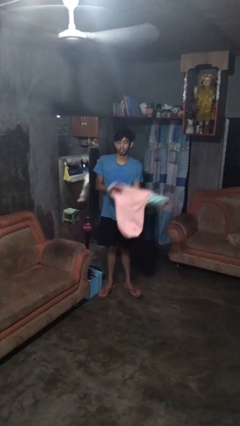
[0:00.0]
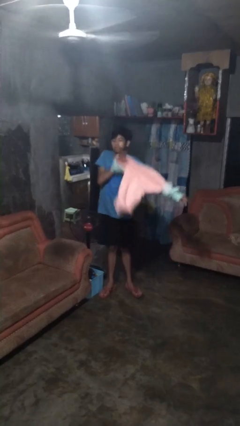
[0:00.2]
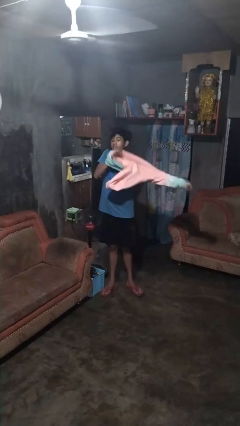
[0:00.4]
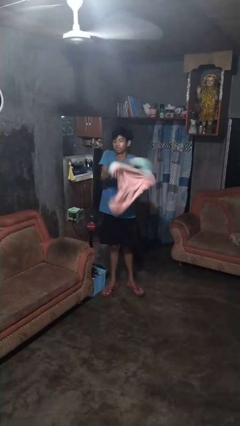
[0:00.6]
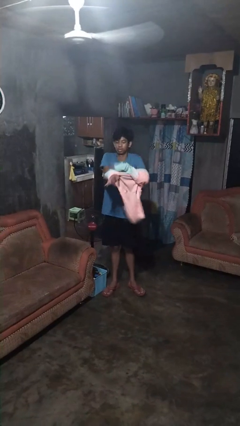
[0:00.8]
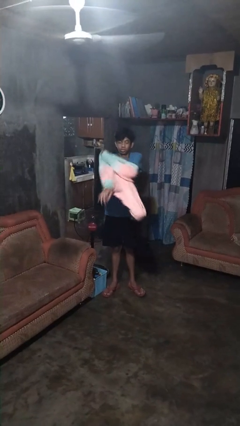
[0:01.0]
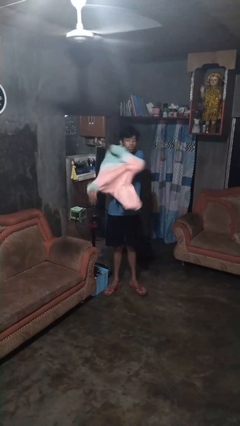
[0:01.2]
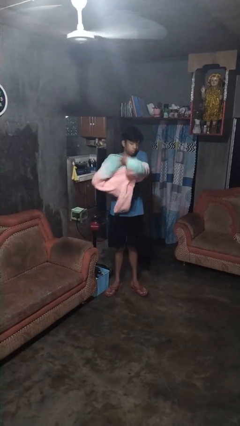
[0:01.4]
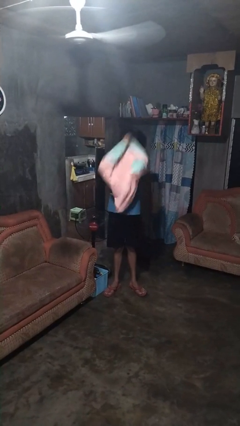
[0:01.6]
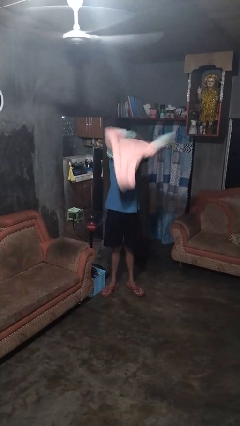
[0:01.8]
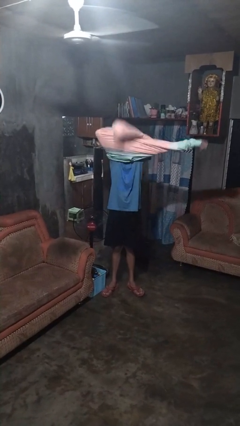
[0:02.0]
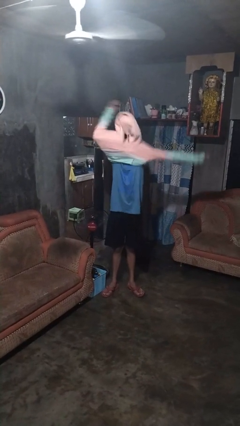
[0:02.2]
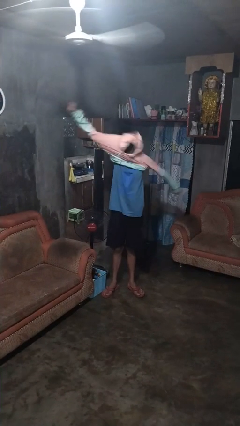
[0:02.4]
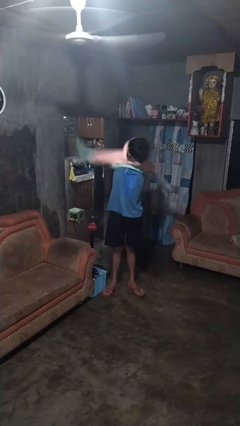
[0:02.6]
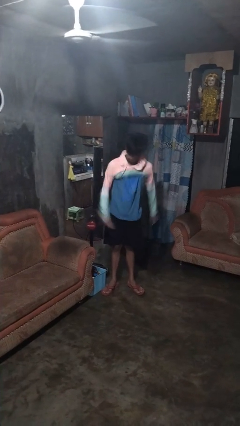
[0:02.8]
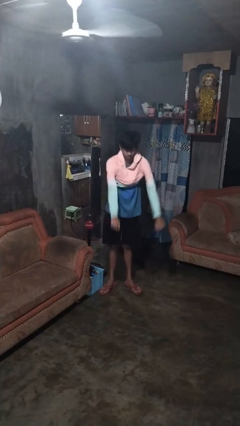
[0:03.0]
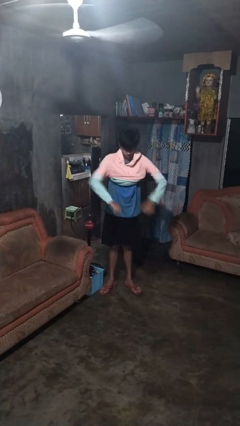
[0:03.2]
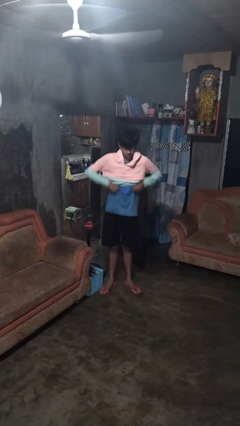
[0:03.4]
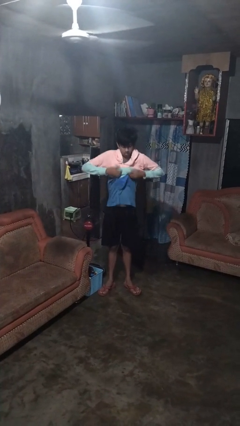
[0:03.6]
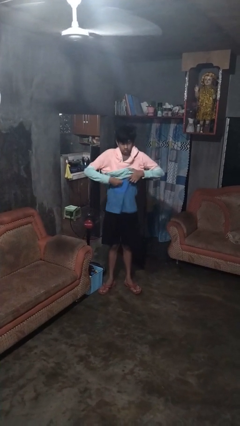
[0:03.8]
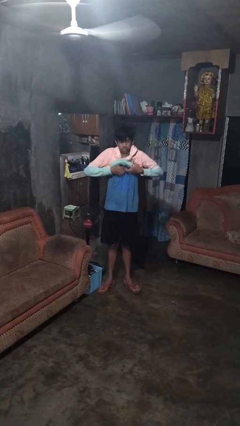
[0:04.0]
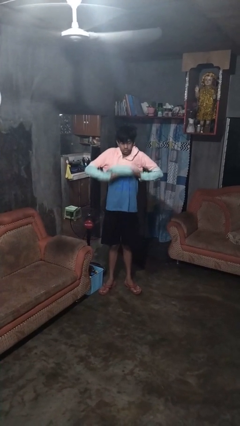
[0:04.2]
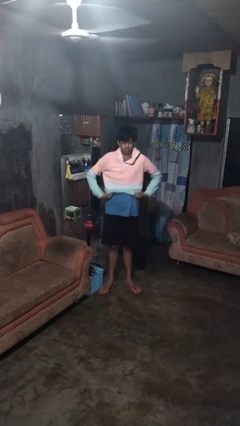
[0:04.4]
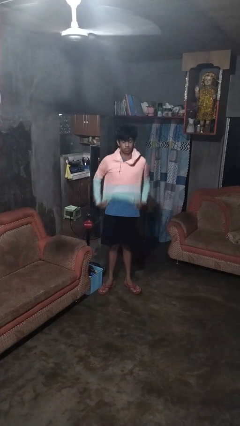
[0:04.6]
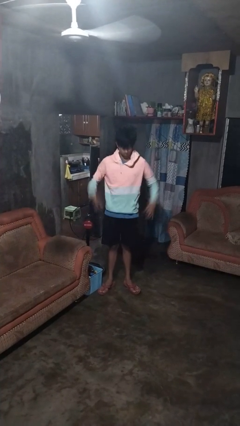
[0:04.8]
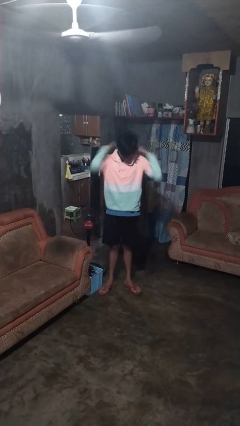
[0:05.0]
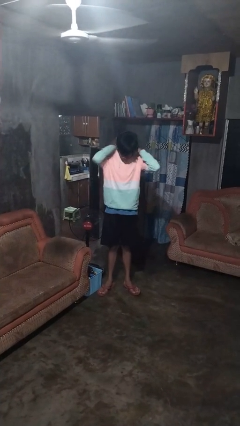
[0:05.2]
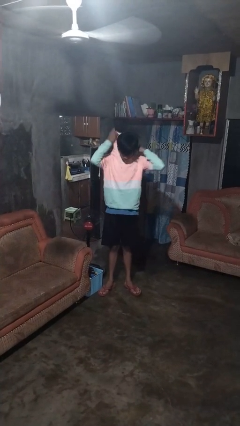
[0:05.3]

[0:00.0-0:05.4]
person puts on hoodie

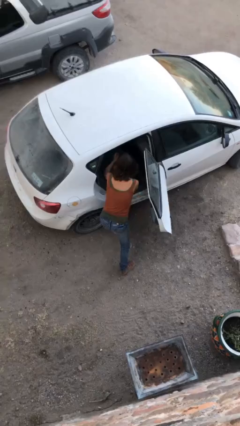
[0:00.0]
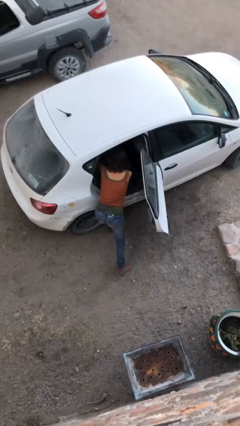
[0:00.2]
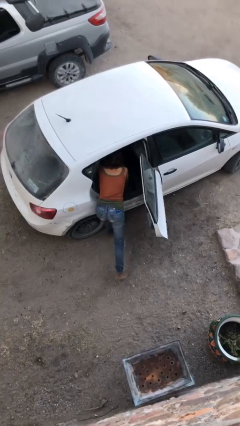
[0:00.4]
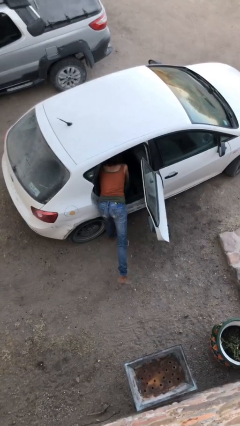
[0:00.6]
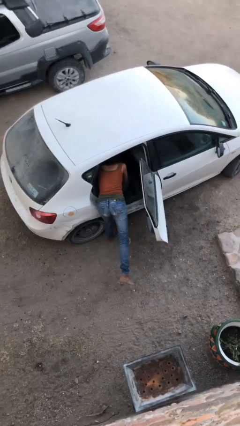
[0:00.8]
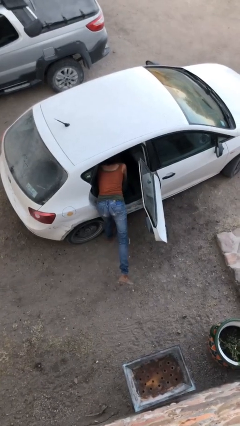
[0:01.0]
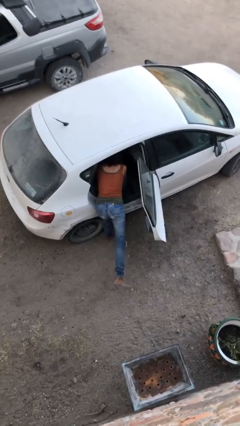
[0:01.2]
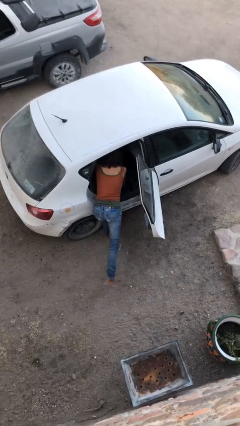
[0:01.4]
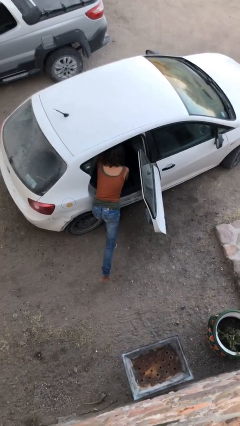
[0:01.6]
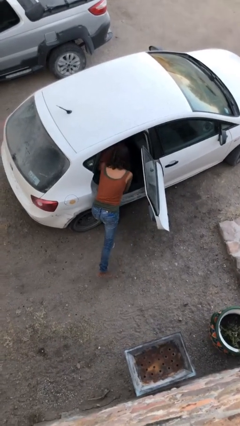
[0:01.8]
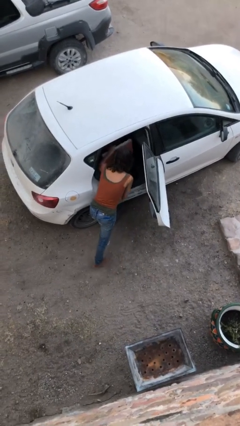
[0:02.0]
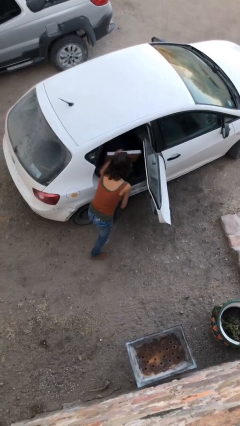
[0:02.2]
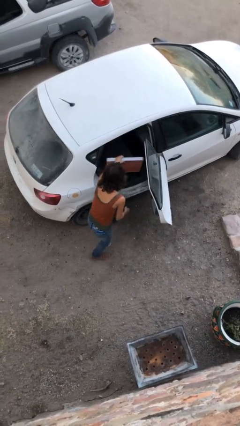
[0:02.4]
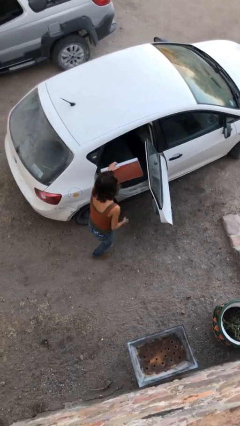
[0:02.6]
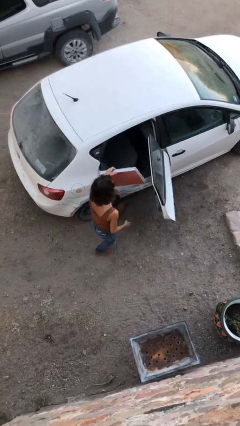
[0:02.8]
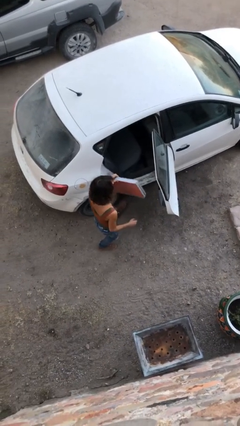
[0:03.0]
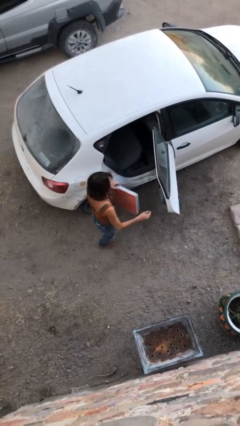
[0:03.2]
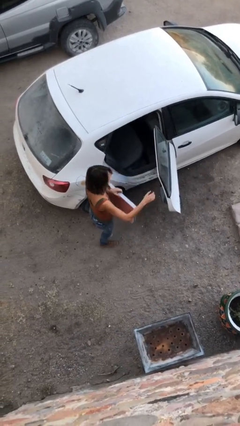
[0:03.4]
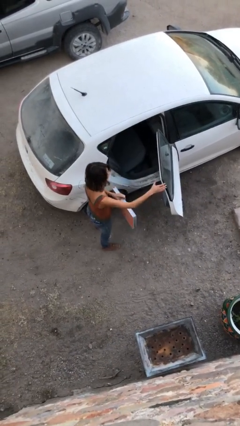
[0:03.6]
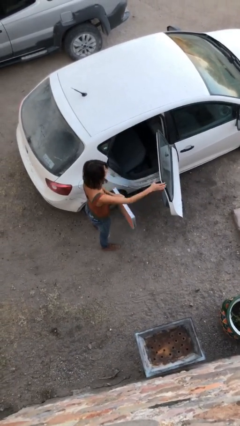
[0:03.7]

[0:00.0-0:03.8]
person unloads car

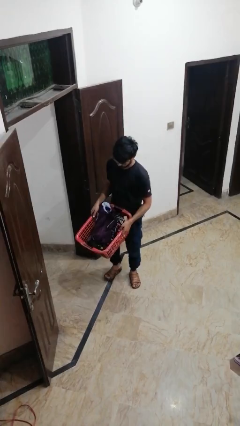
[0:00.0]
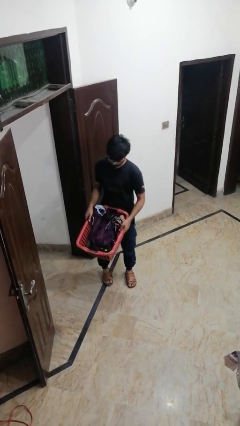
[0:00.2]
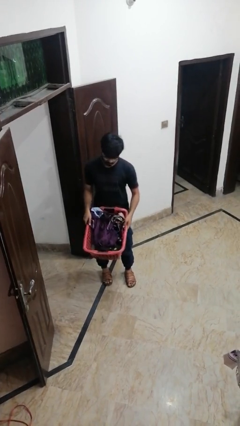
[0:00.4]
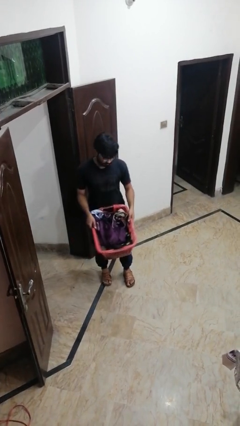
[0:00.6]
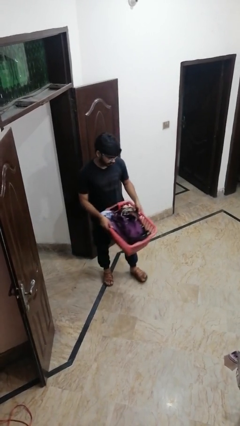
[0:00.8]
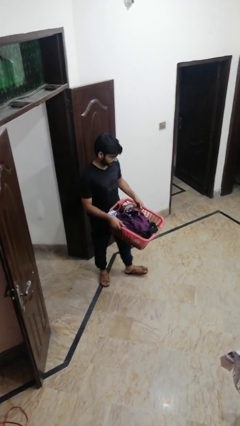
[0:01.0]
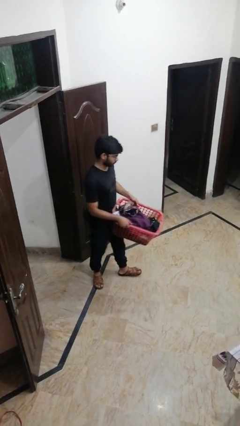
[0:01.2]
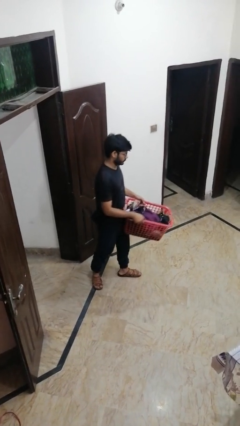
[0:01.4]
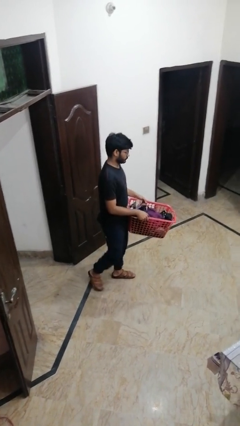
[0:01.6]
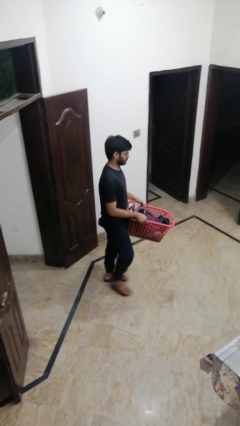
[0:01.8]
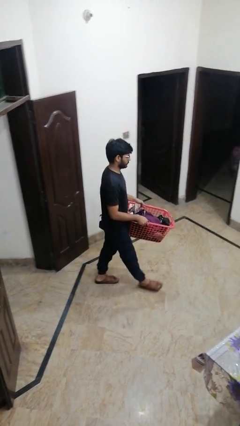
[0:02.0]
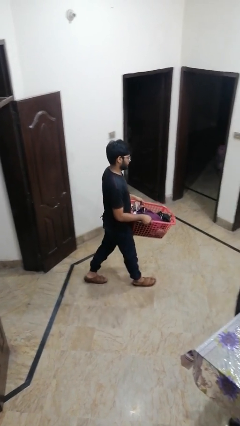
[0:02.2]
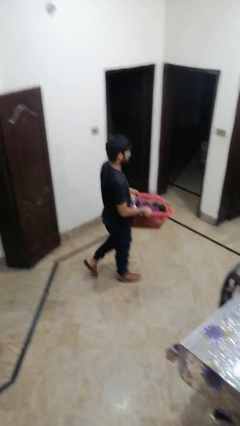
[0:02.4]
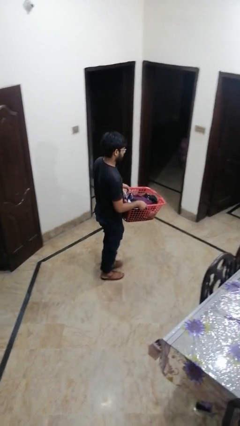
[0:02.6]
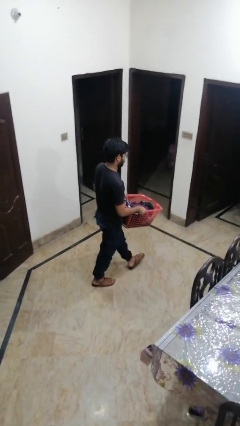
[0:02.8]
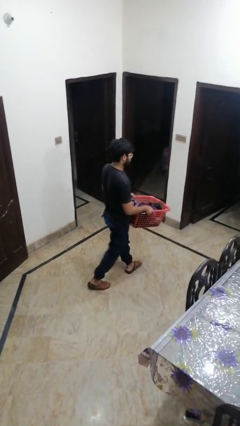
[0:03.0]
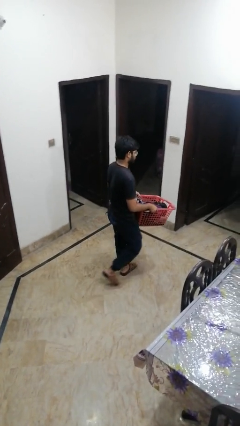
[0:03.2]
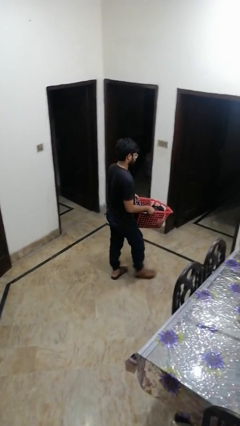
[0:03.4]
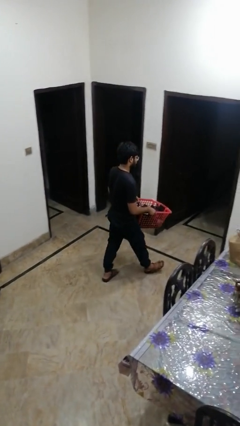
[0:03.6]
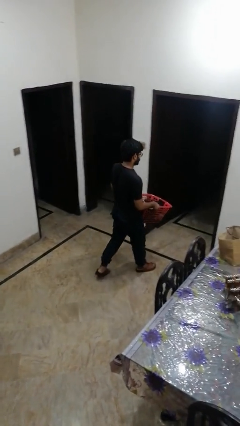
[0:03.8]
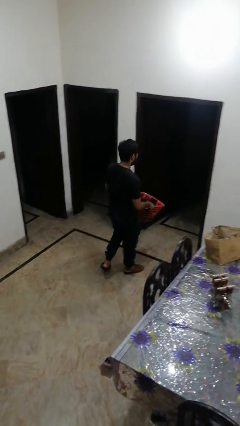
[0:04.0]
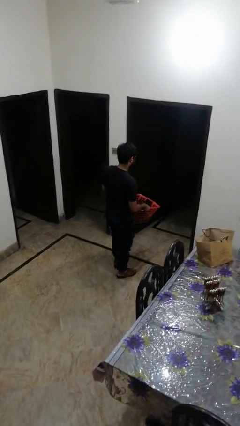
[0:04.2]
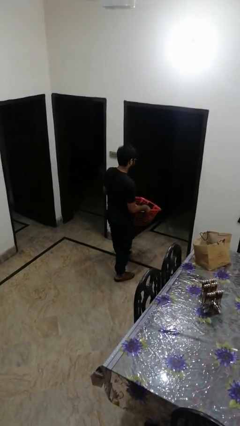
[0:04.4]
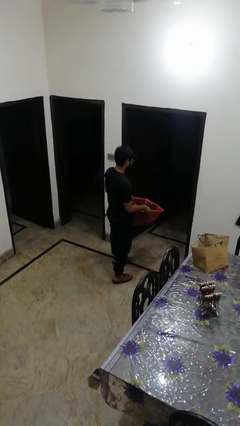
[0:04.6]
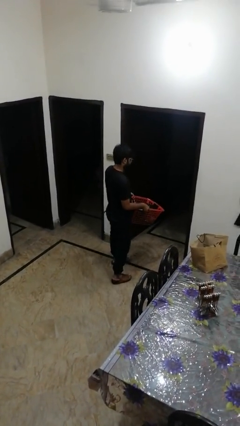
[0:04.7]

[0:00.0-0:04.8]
person carries laundry basket

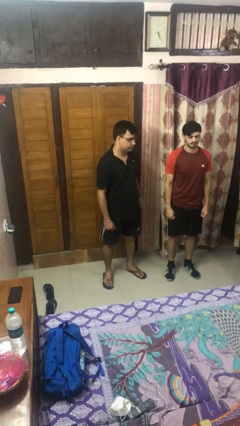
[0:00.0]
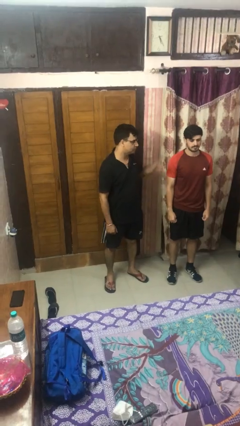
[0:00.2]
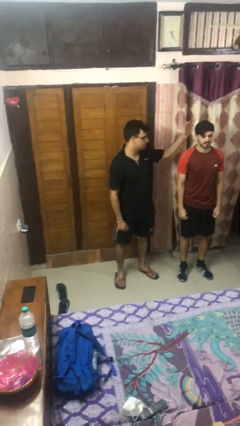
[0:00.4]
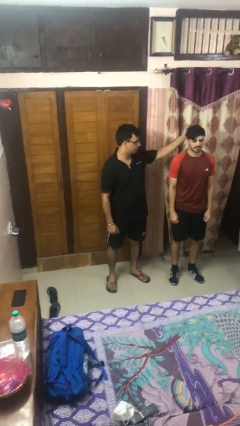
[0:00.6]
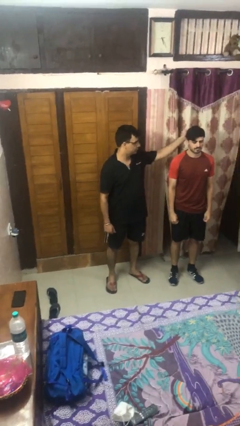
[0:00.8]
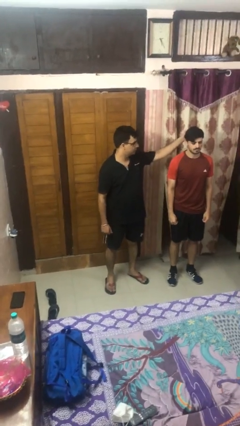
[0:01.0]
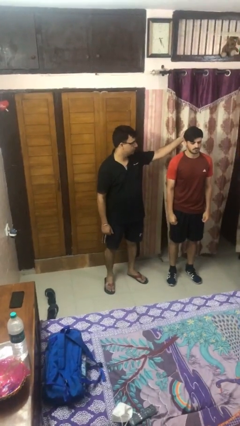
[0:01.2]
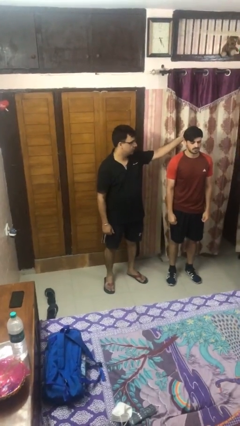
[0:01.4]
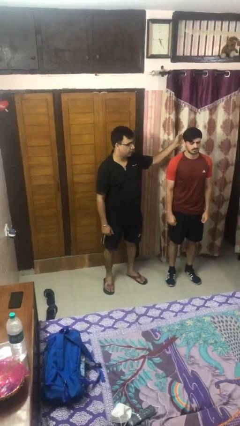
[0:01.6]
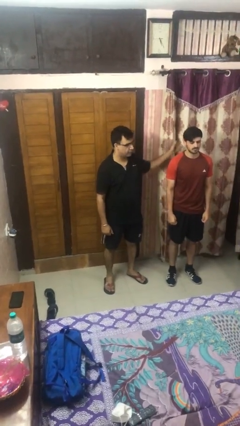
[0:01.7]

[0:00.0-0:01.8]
person grabs person by hair

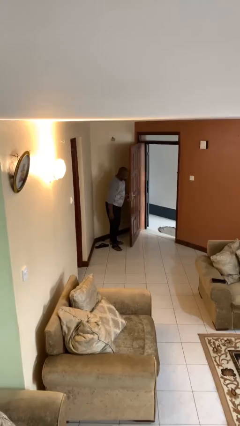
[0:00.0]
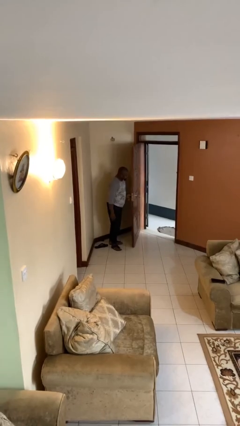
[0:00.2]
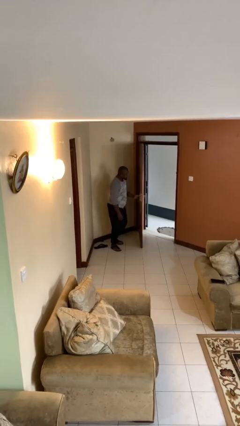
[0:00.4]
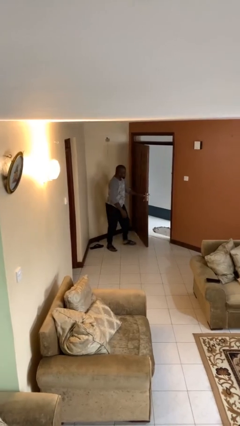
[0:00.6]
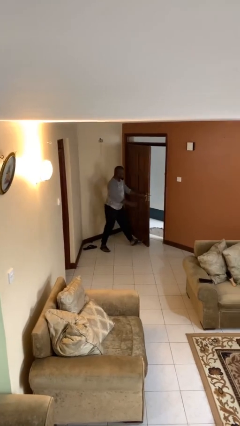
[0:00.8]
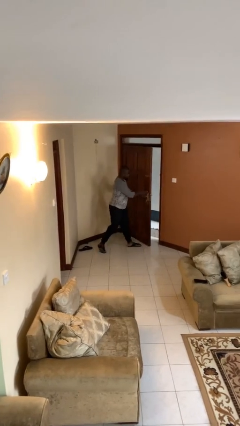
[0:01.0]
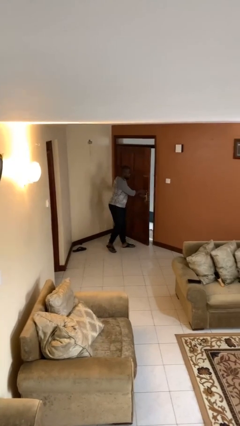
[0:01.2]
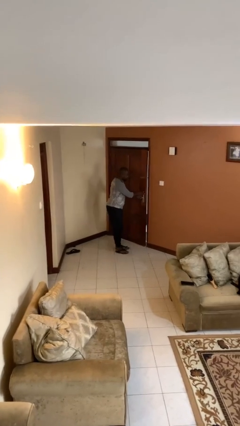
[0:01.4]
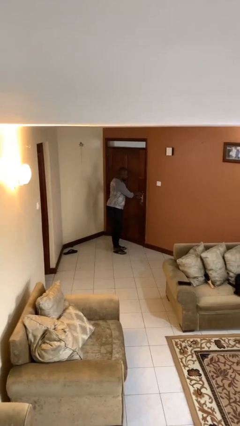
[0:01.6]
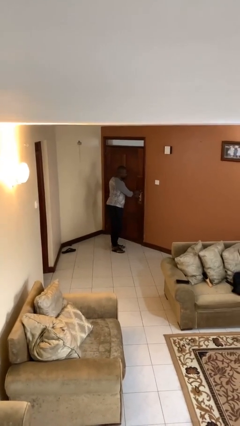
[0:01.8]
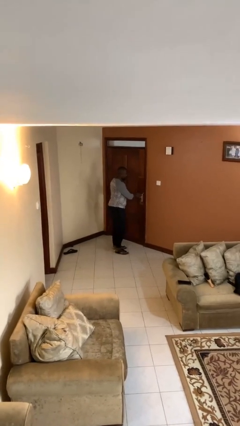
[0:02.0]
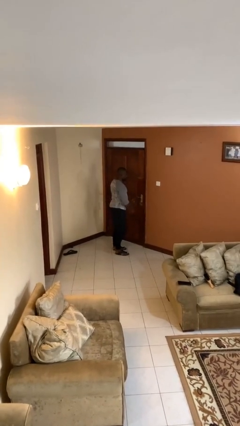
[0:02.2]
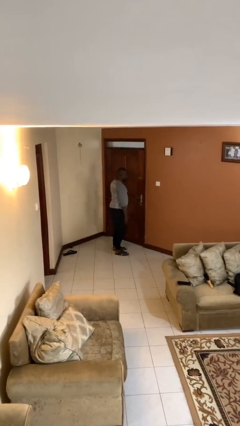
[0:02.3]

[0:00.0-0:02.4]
person closes facility door
